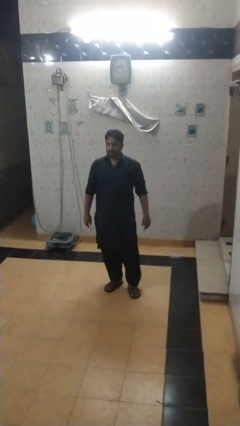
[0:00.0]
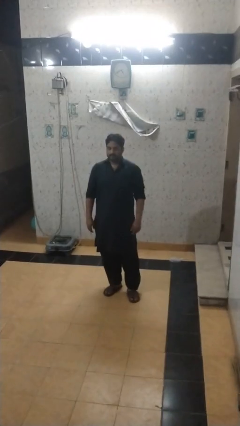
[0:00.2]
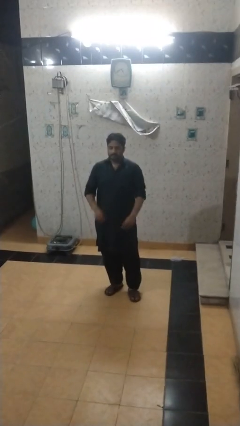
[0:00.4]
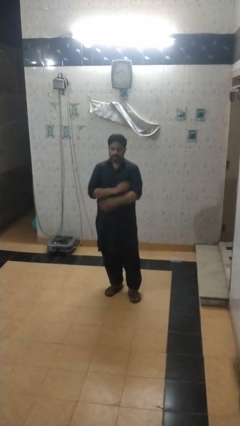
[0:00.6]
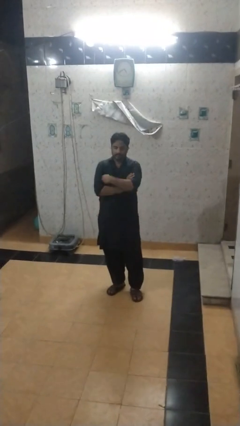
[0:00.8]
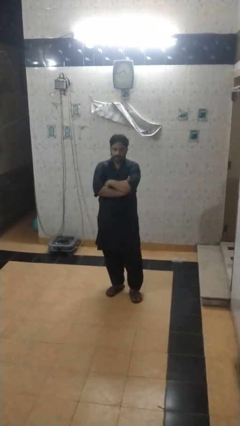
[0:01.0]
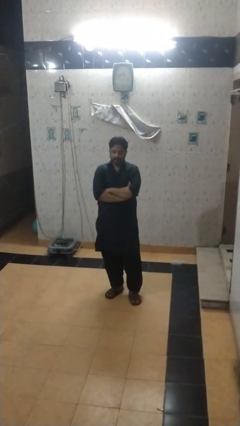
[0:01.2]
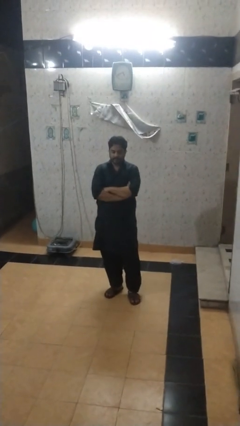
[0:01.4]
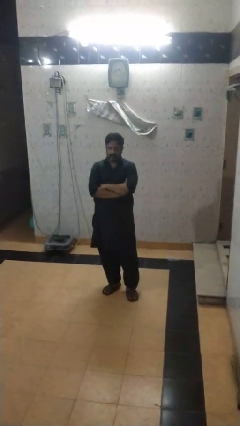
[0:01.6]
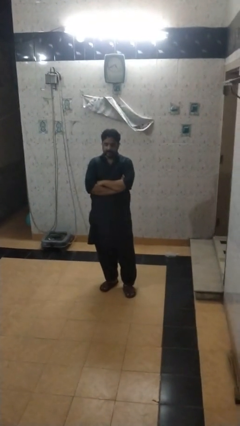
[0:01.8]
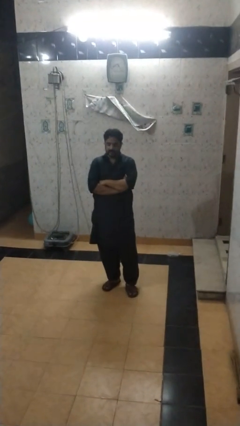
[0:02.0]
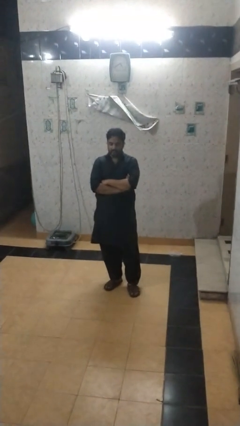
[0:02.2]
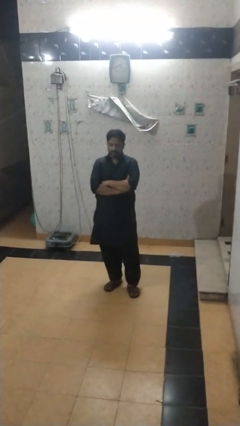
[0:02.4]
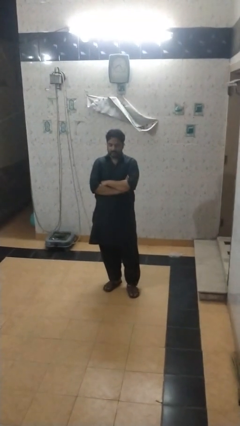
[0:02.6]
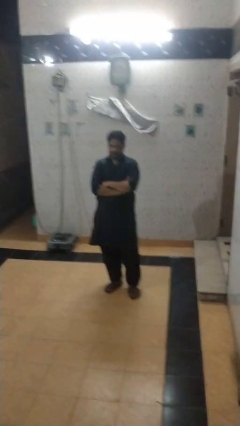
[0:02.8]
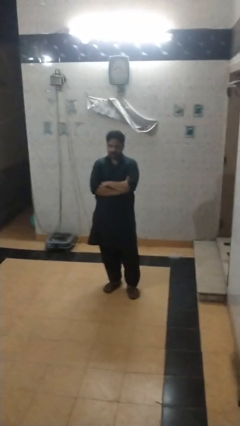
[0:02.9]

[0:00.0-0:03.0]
person crosses arms

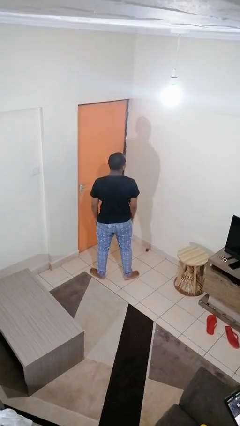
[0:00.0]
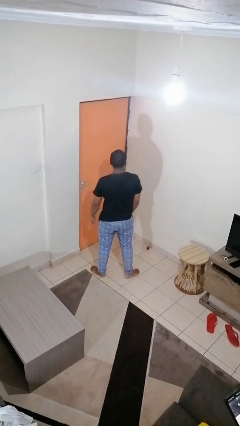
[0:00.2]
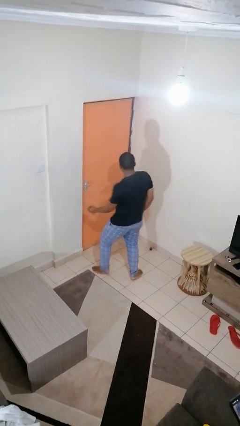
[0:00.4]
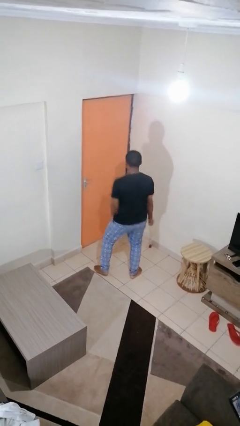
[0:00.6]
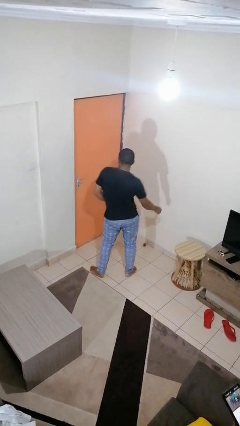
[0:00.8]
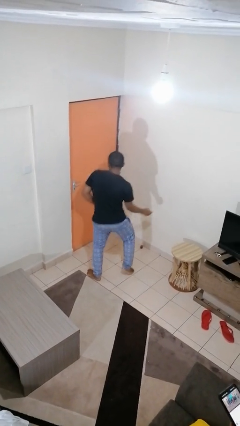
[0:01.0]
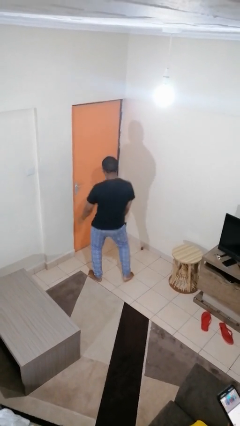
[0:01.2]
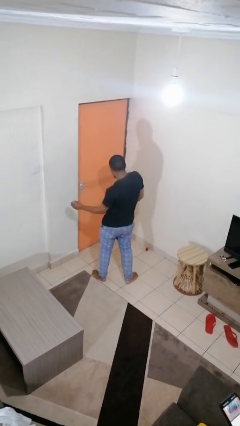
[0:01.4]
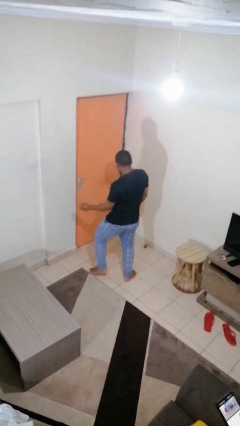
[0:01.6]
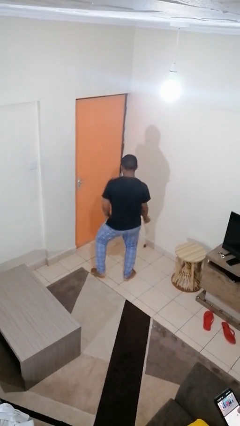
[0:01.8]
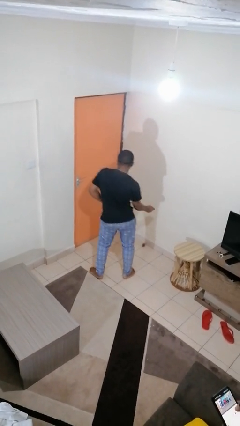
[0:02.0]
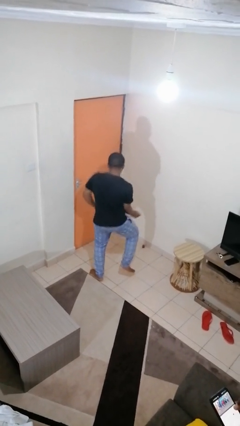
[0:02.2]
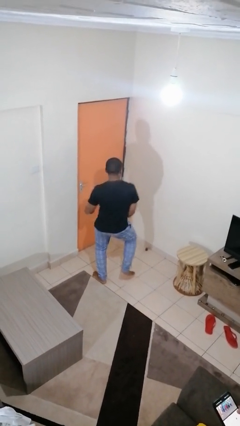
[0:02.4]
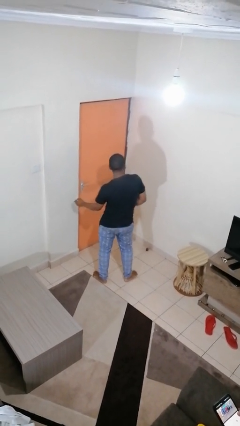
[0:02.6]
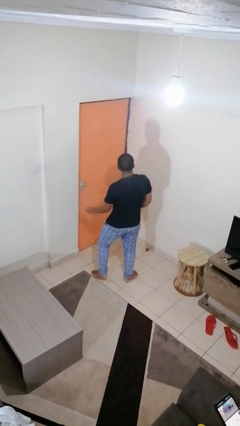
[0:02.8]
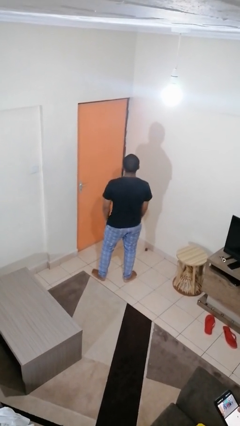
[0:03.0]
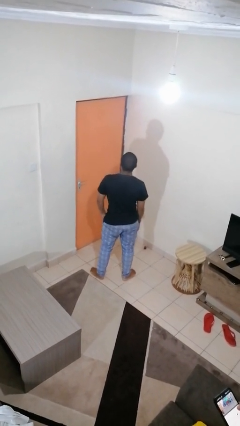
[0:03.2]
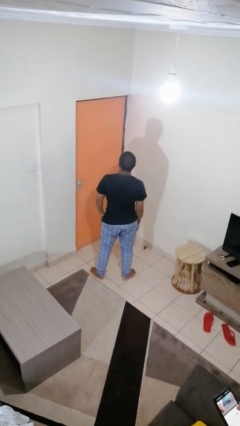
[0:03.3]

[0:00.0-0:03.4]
person dances in place

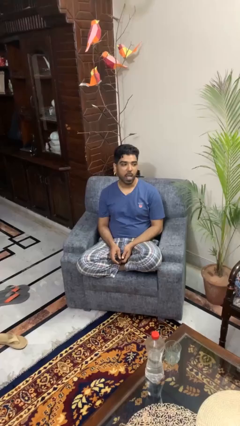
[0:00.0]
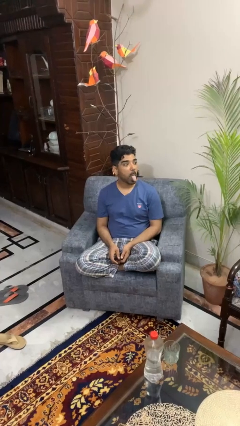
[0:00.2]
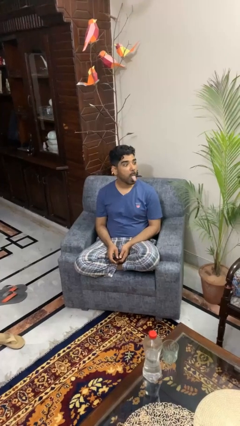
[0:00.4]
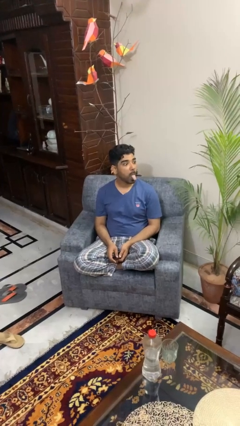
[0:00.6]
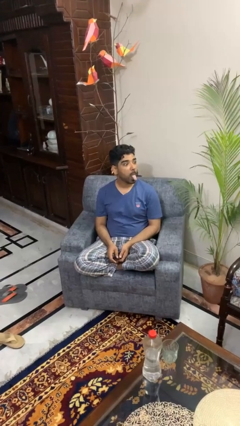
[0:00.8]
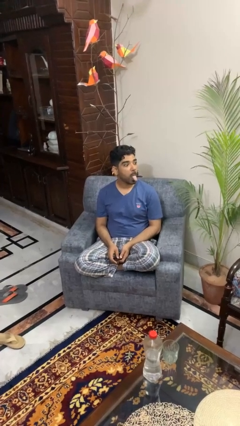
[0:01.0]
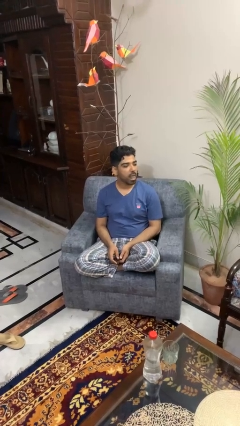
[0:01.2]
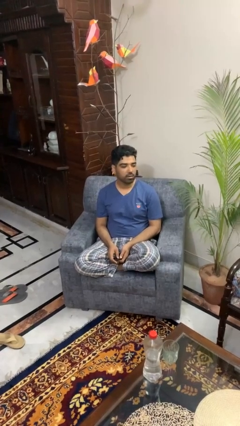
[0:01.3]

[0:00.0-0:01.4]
person sticks out tongue

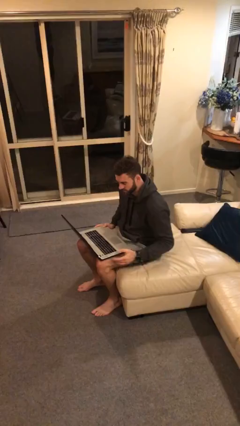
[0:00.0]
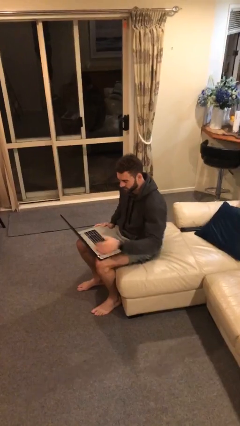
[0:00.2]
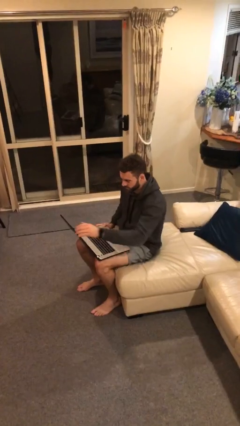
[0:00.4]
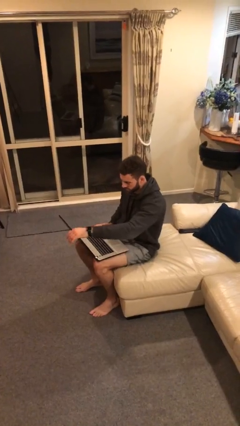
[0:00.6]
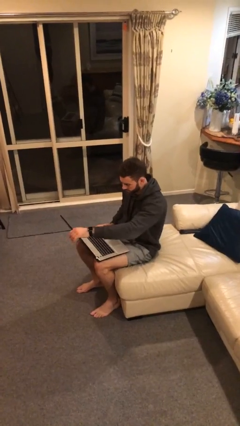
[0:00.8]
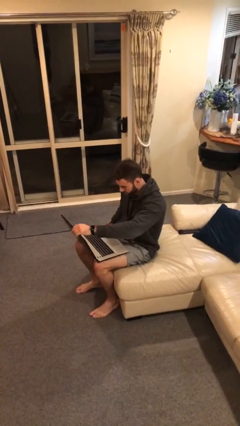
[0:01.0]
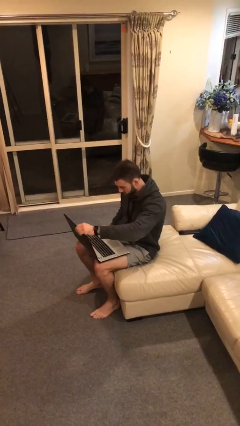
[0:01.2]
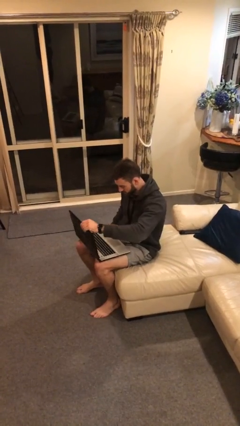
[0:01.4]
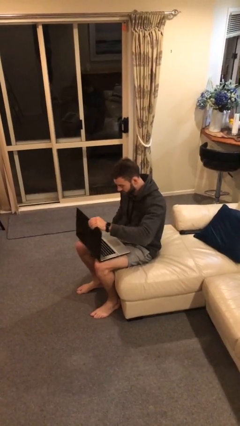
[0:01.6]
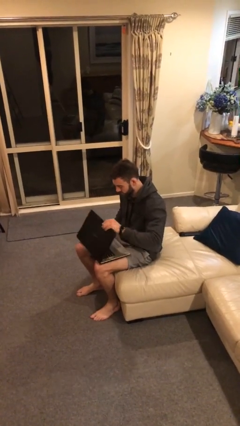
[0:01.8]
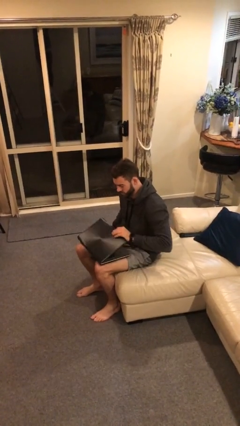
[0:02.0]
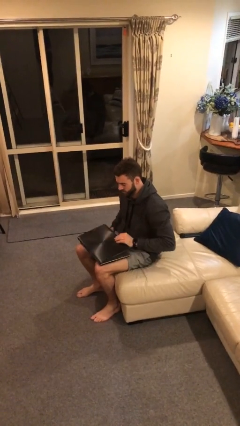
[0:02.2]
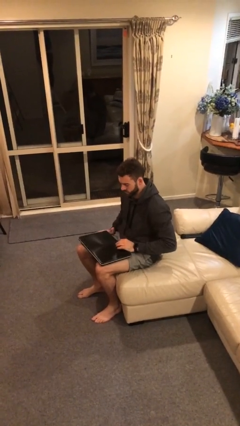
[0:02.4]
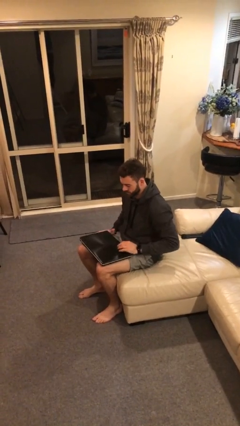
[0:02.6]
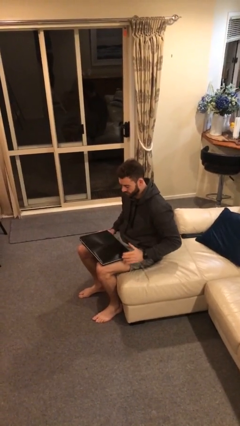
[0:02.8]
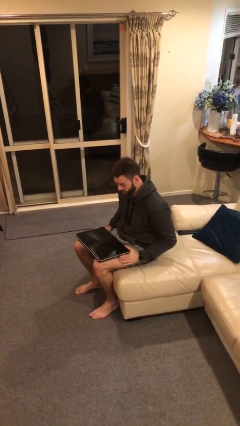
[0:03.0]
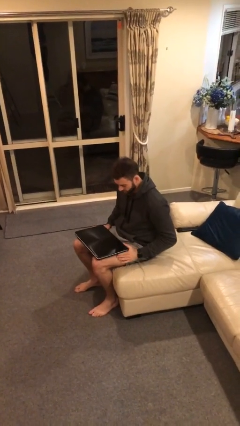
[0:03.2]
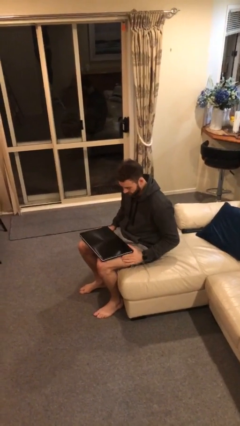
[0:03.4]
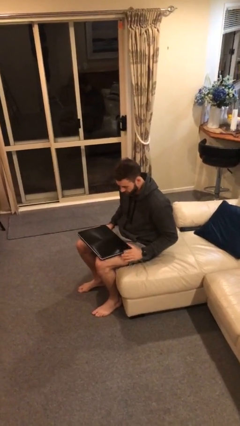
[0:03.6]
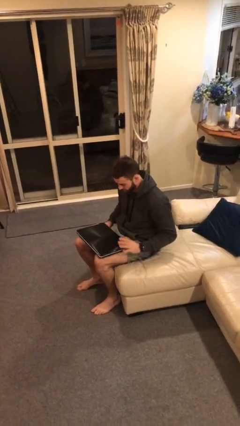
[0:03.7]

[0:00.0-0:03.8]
person closes laptop

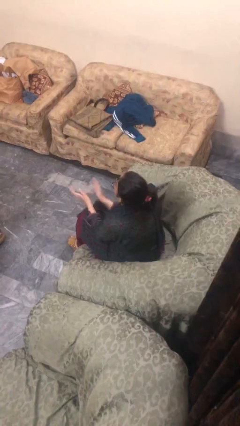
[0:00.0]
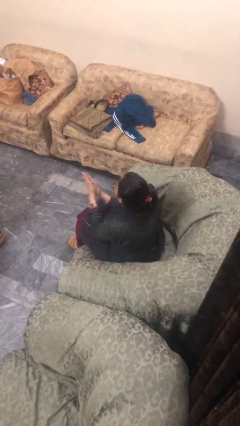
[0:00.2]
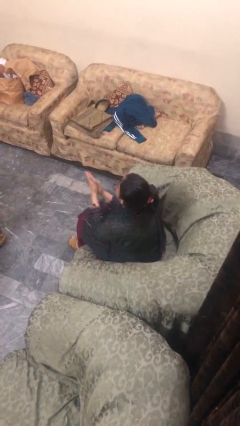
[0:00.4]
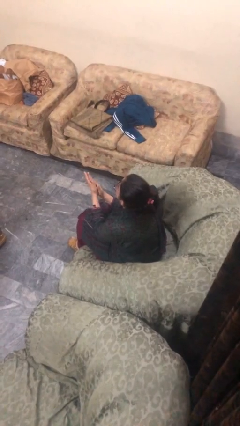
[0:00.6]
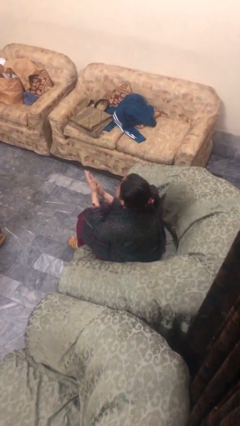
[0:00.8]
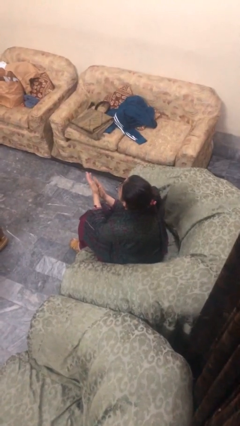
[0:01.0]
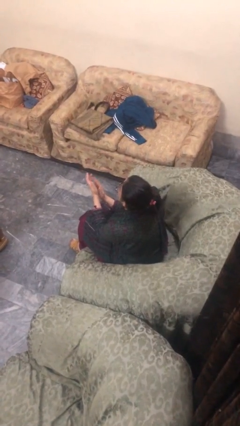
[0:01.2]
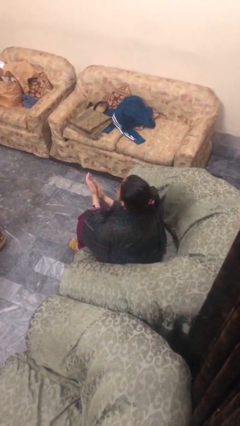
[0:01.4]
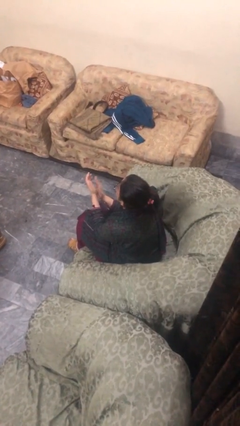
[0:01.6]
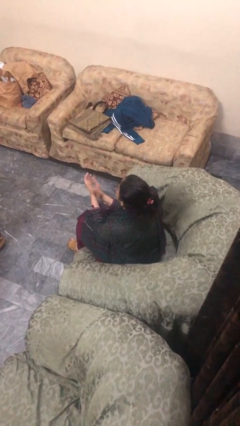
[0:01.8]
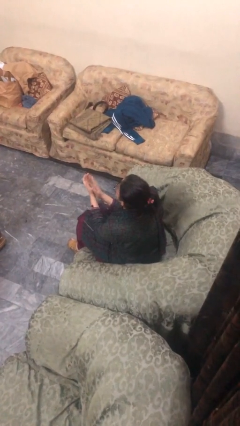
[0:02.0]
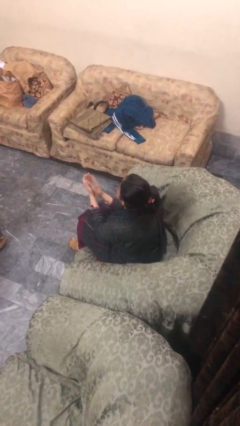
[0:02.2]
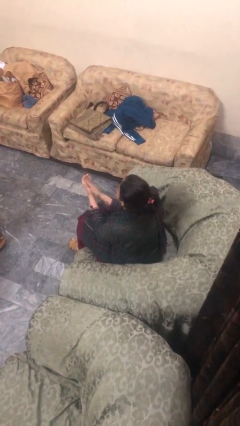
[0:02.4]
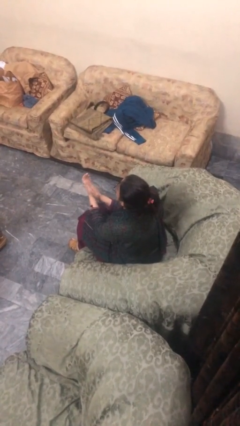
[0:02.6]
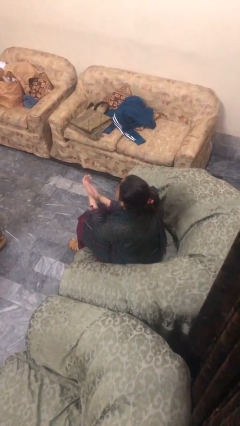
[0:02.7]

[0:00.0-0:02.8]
person claps hands

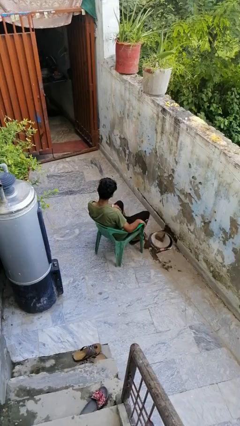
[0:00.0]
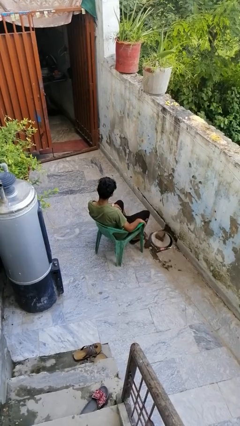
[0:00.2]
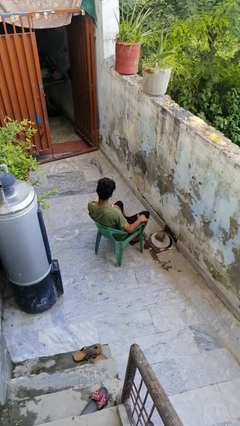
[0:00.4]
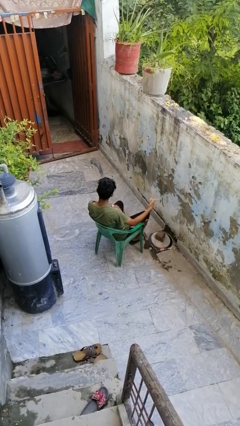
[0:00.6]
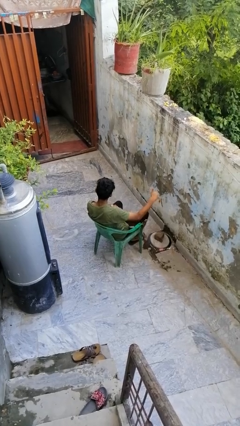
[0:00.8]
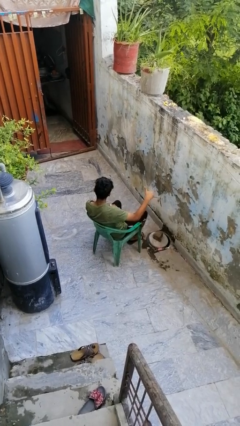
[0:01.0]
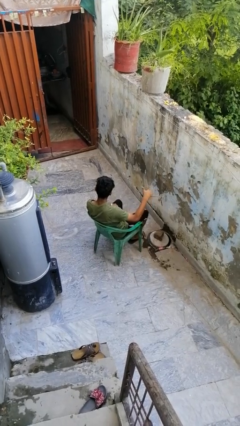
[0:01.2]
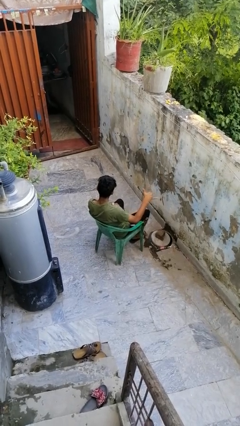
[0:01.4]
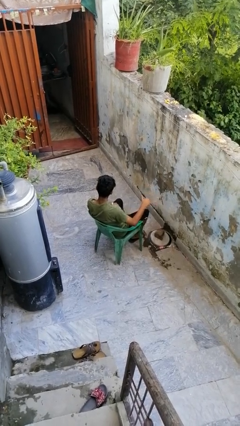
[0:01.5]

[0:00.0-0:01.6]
person gestures hang loose

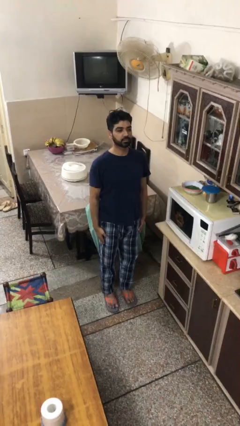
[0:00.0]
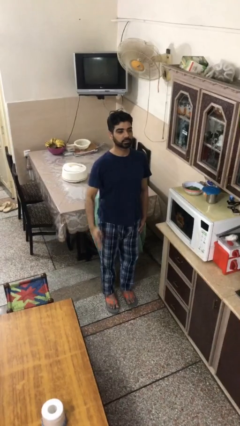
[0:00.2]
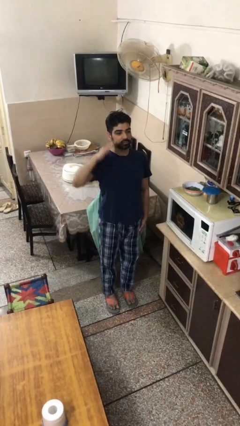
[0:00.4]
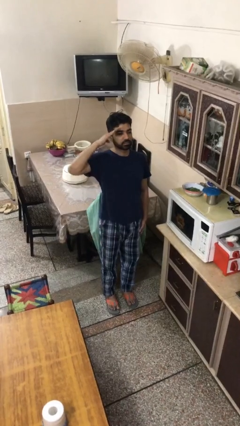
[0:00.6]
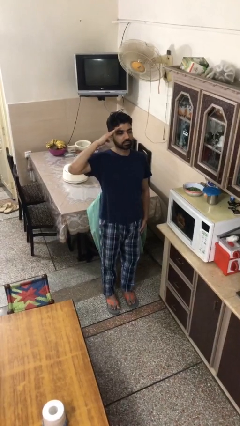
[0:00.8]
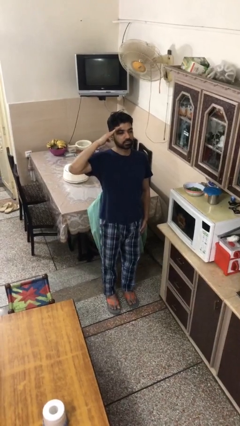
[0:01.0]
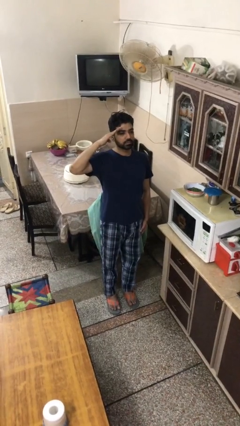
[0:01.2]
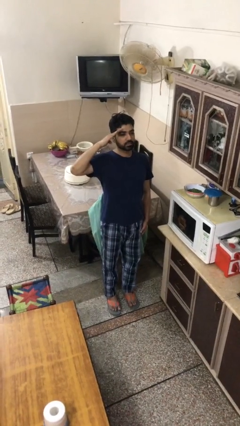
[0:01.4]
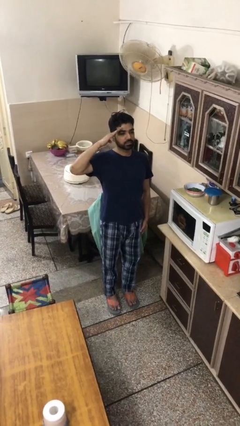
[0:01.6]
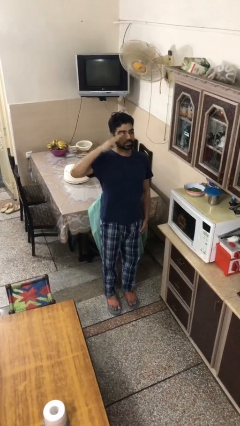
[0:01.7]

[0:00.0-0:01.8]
person salutes
